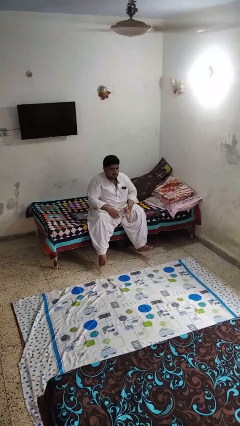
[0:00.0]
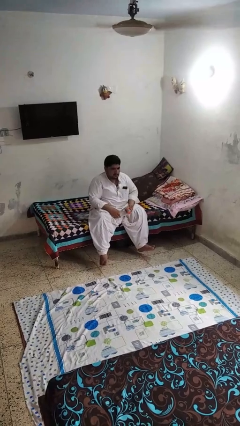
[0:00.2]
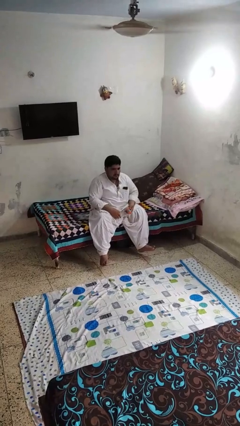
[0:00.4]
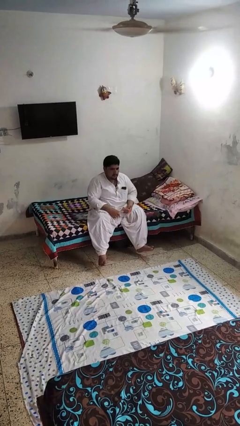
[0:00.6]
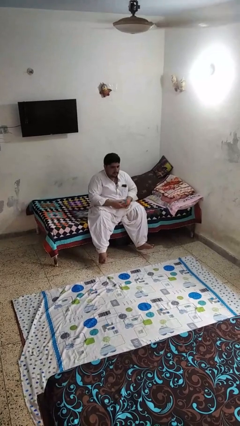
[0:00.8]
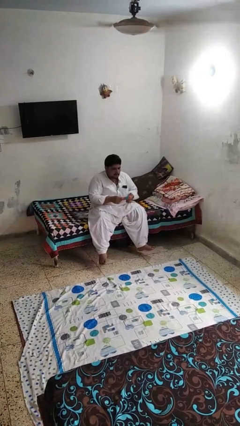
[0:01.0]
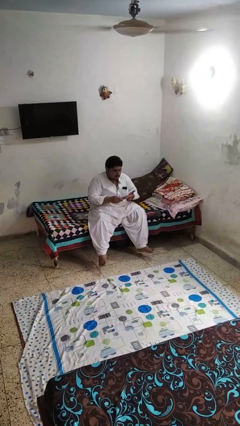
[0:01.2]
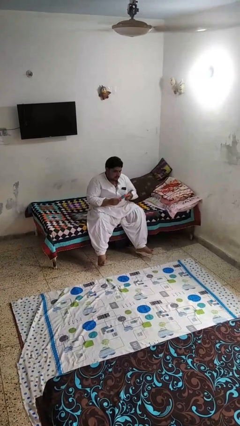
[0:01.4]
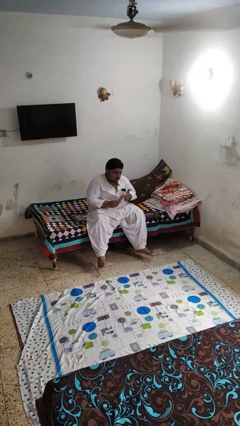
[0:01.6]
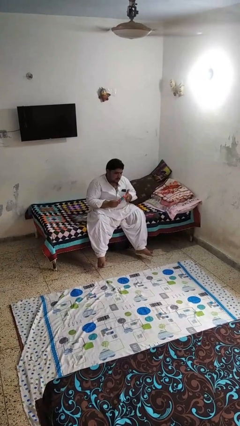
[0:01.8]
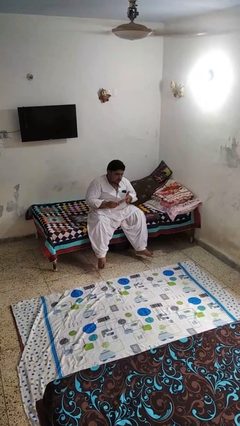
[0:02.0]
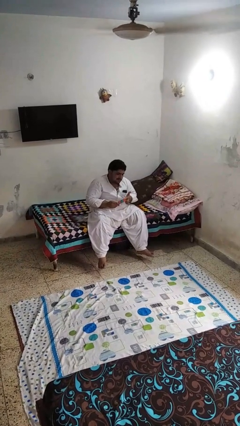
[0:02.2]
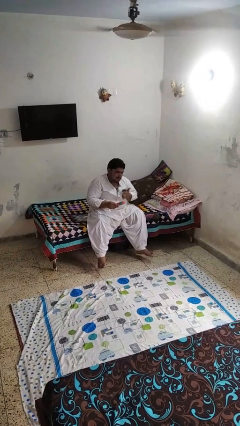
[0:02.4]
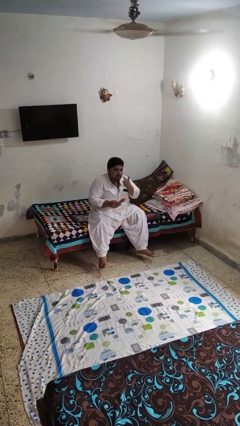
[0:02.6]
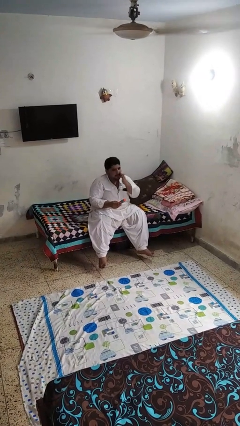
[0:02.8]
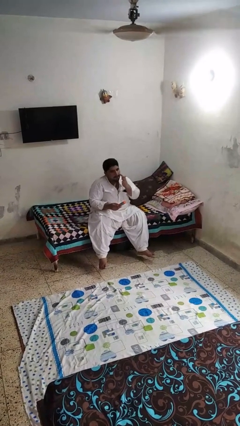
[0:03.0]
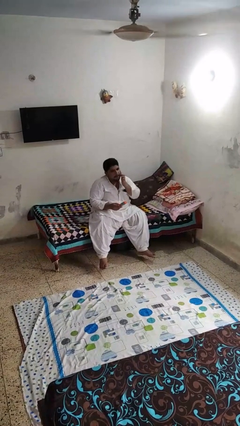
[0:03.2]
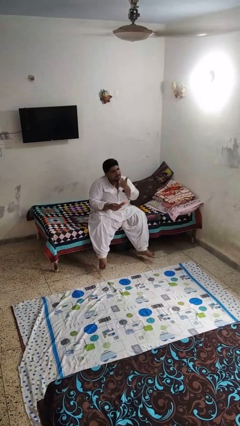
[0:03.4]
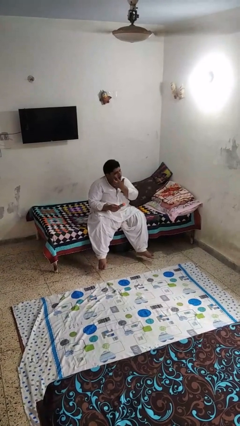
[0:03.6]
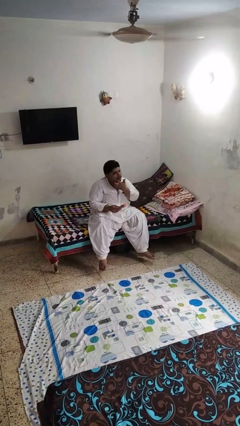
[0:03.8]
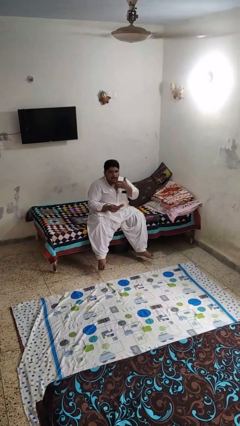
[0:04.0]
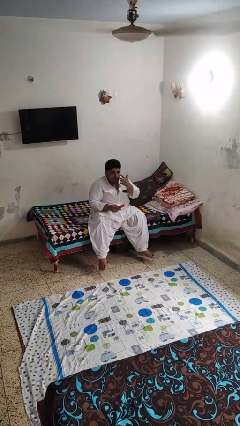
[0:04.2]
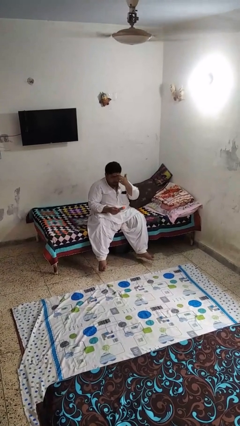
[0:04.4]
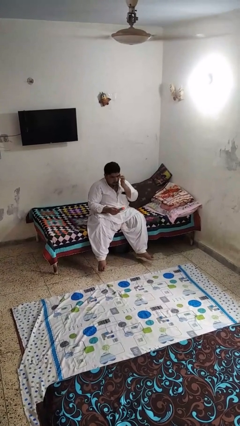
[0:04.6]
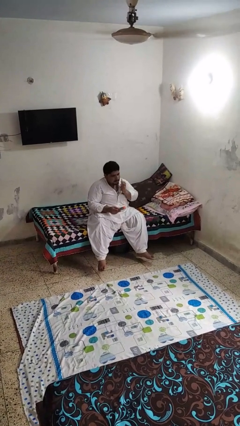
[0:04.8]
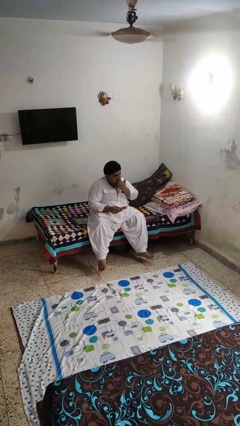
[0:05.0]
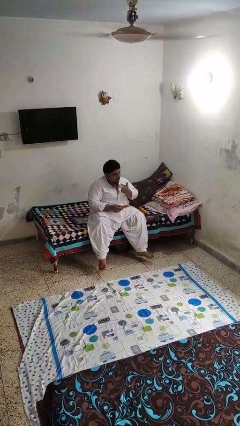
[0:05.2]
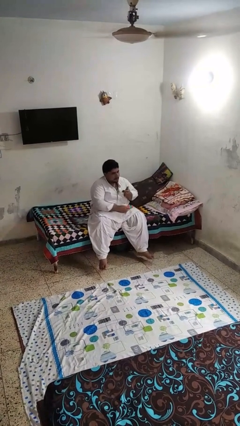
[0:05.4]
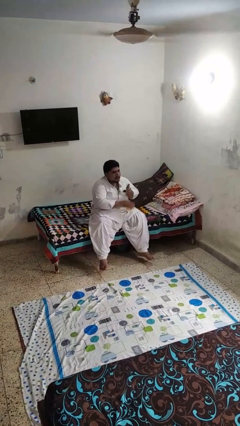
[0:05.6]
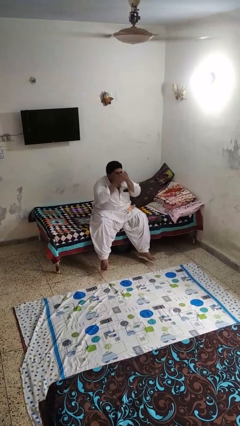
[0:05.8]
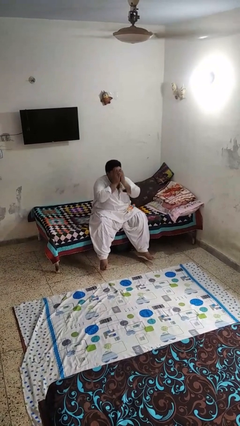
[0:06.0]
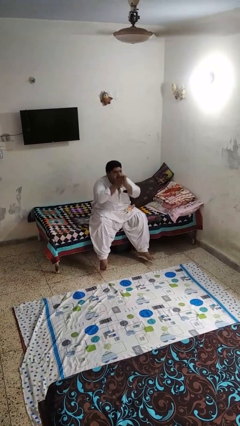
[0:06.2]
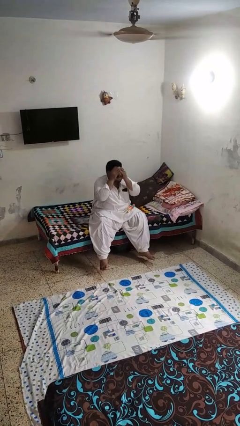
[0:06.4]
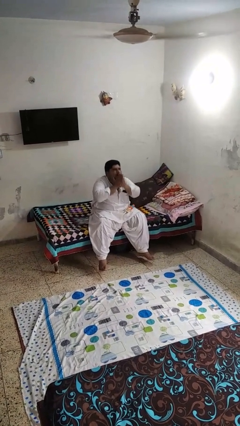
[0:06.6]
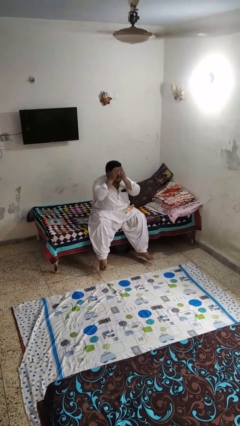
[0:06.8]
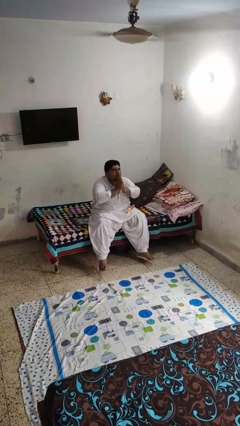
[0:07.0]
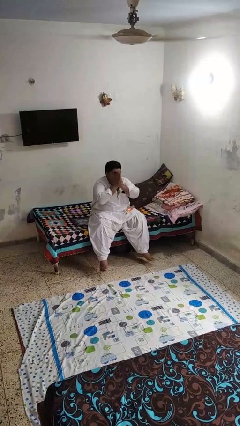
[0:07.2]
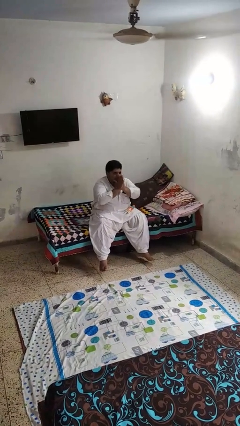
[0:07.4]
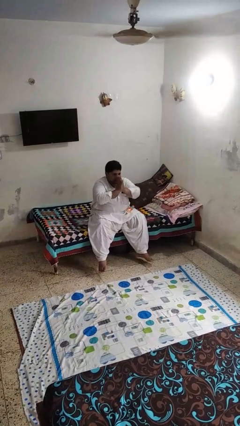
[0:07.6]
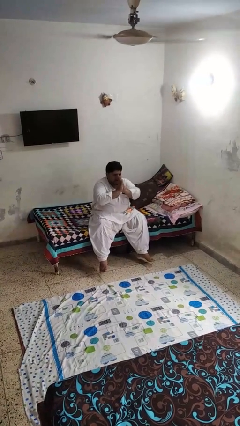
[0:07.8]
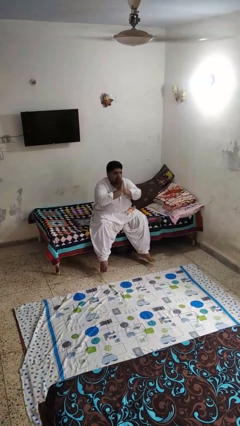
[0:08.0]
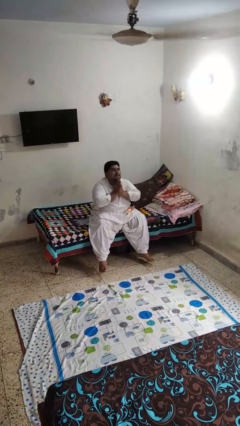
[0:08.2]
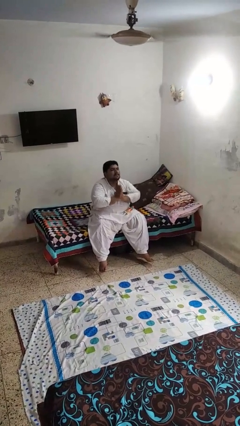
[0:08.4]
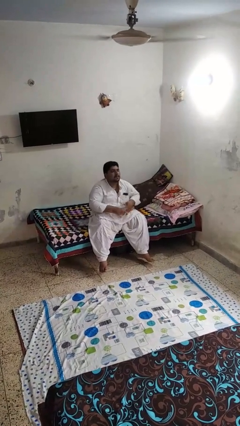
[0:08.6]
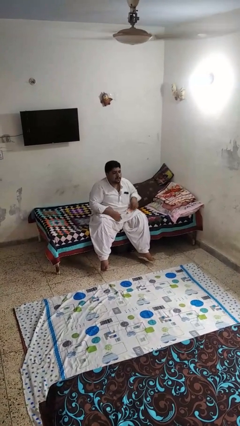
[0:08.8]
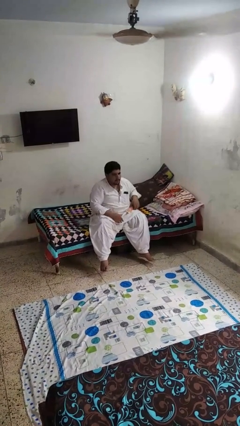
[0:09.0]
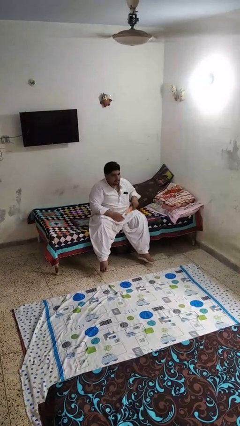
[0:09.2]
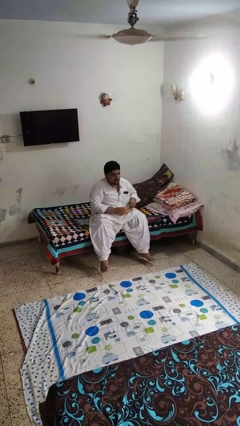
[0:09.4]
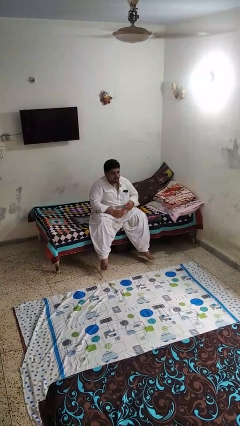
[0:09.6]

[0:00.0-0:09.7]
person applies facial moisturizer

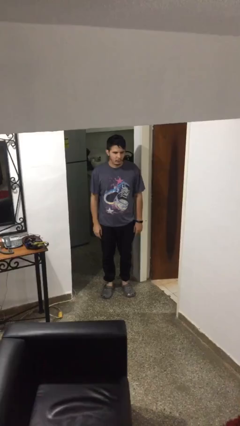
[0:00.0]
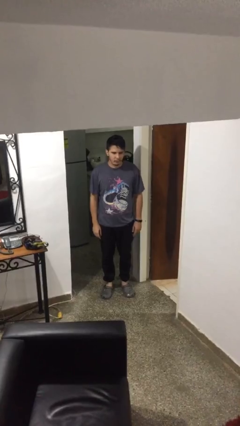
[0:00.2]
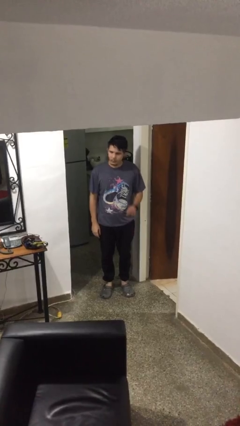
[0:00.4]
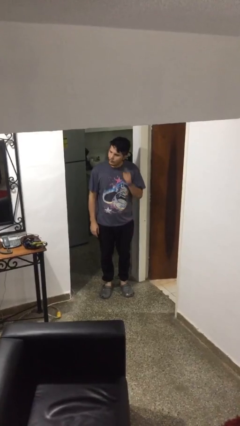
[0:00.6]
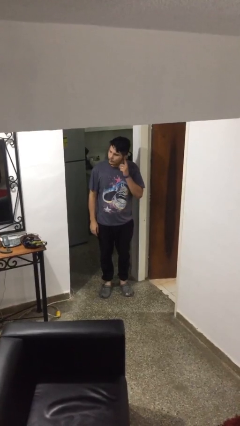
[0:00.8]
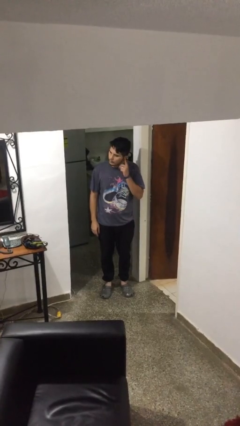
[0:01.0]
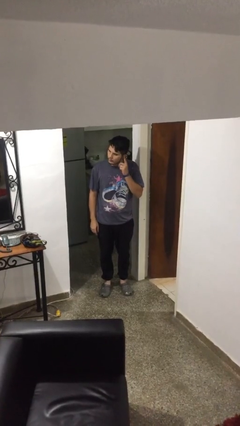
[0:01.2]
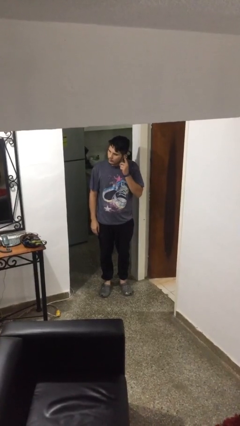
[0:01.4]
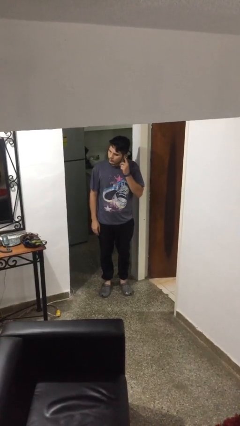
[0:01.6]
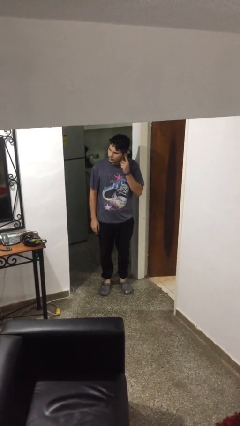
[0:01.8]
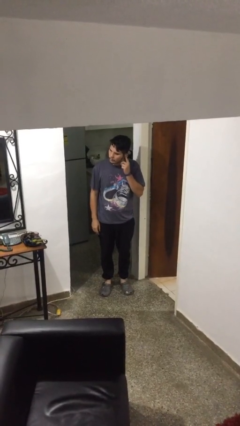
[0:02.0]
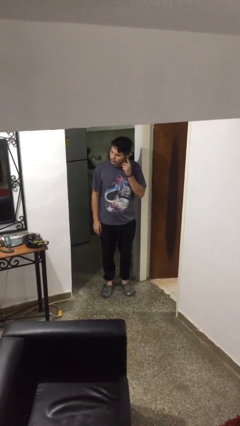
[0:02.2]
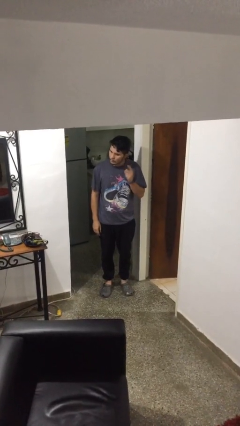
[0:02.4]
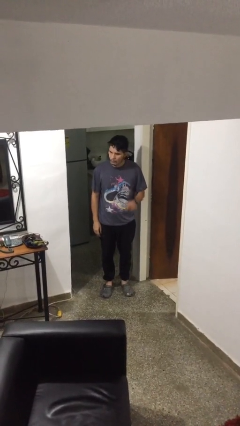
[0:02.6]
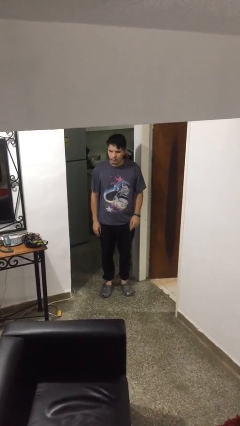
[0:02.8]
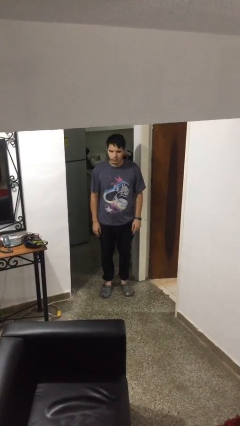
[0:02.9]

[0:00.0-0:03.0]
person gestures listen closely

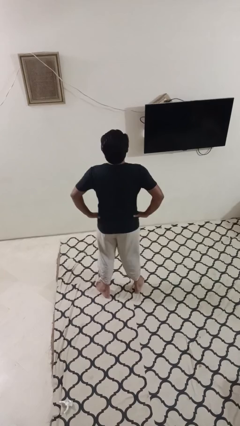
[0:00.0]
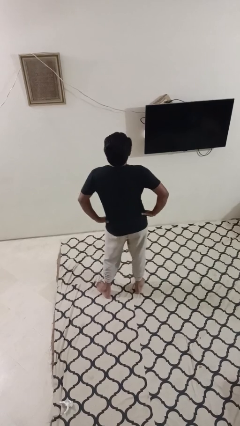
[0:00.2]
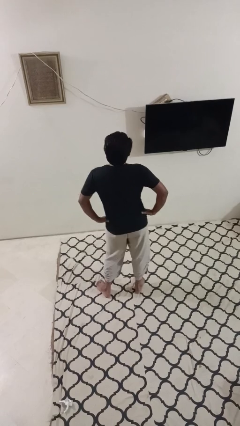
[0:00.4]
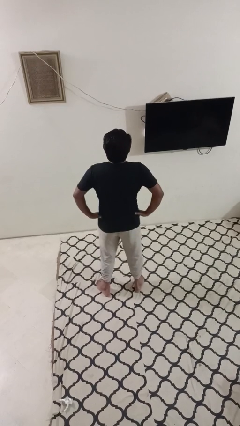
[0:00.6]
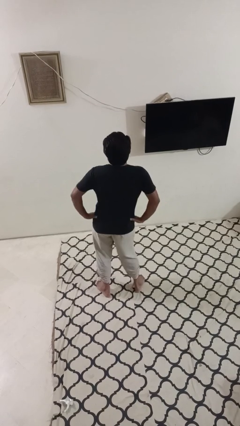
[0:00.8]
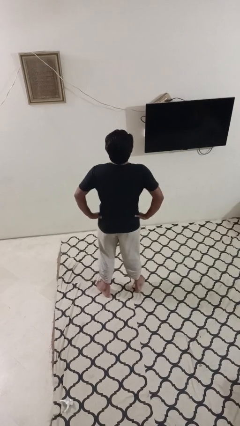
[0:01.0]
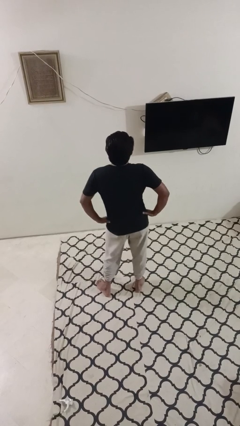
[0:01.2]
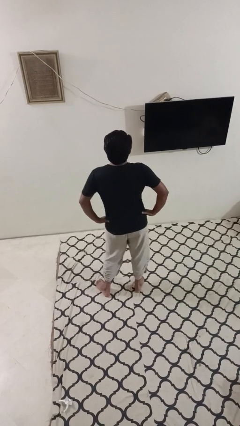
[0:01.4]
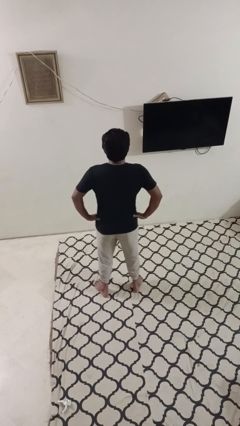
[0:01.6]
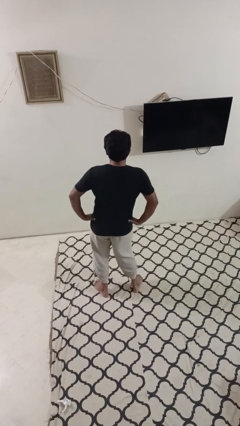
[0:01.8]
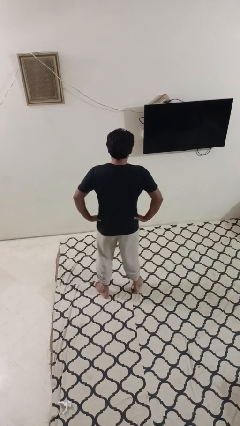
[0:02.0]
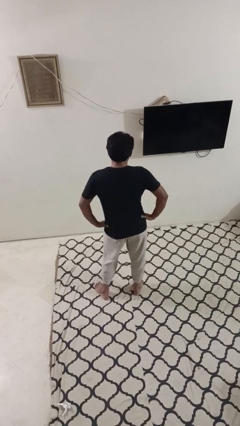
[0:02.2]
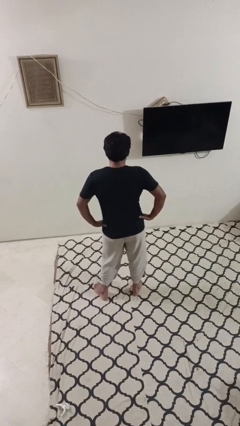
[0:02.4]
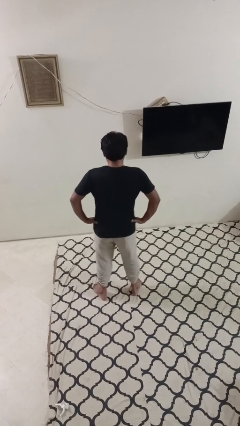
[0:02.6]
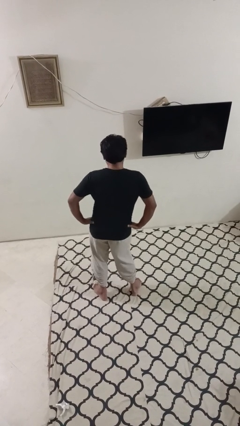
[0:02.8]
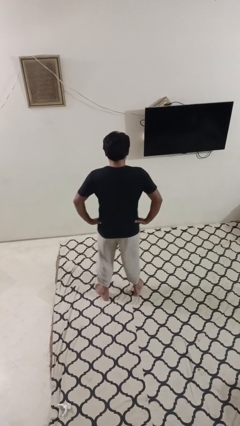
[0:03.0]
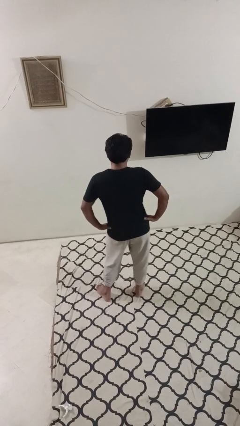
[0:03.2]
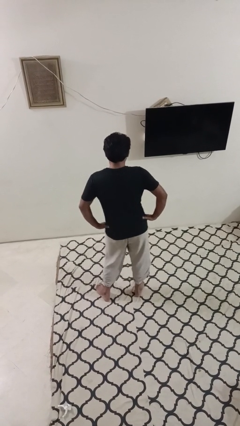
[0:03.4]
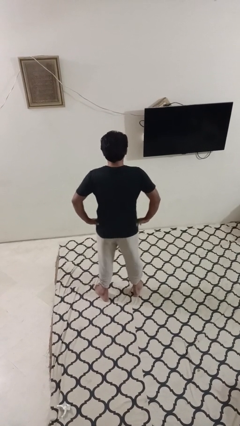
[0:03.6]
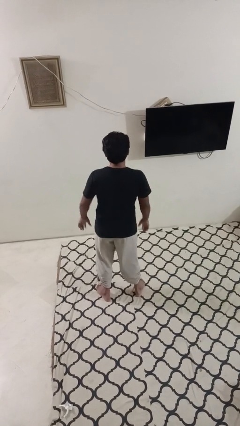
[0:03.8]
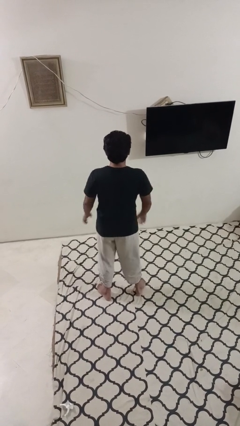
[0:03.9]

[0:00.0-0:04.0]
person wiggles hips

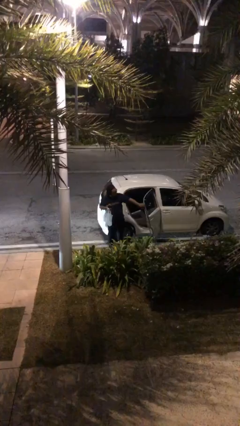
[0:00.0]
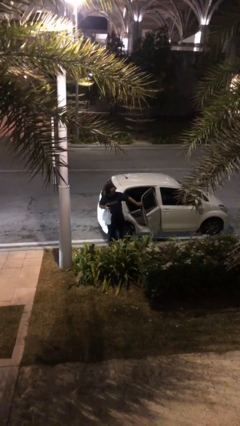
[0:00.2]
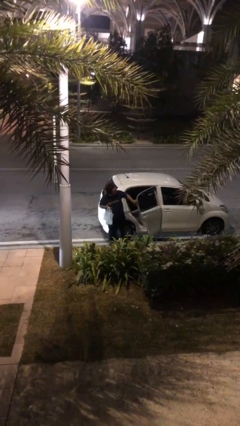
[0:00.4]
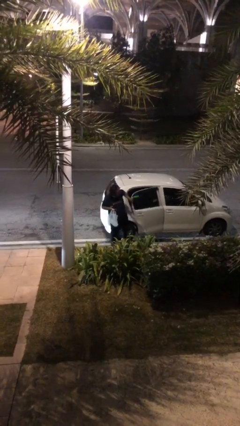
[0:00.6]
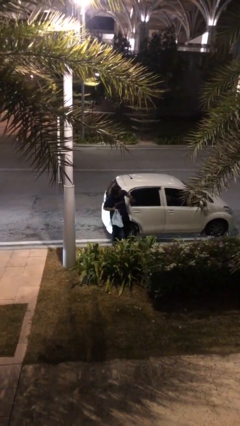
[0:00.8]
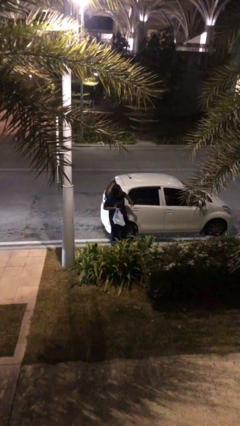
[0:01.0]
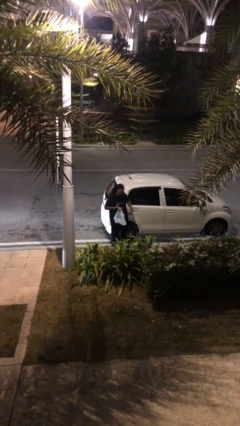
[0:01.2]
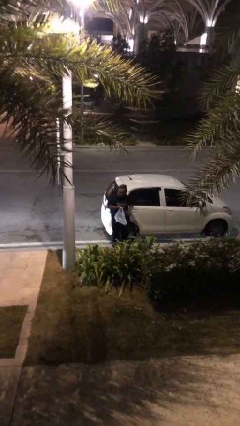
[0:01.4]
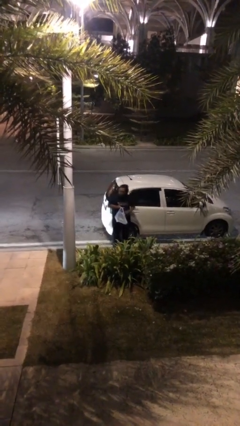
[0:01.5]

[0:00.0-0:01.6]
person closes car door
